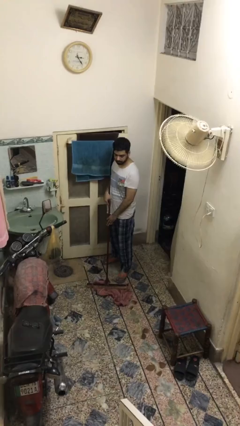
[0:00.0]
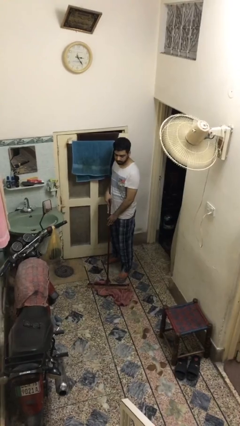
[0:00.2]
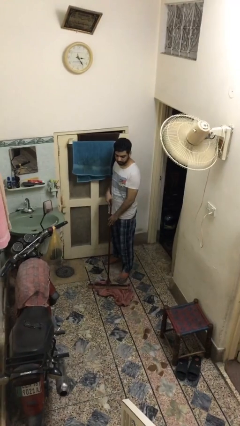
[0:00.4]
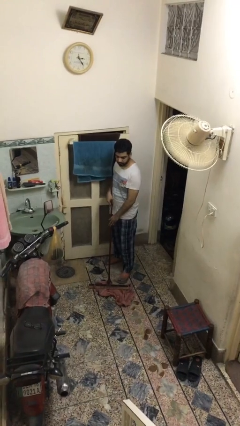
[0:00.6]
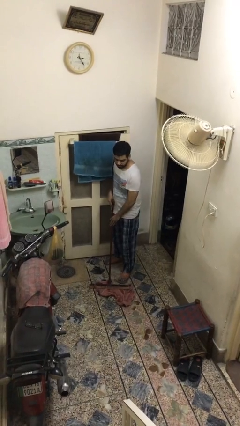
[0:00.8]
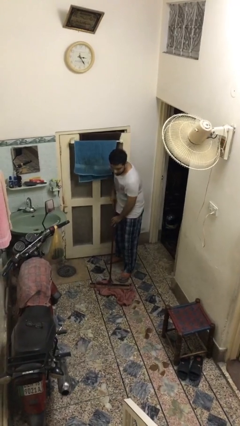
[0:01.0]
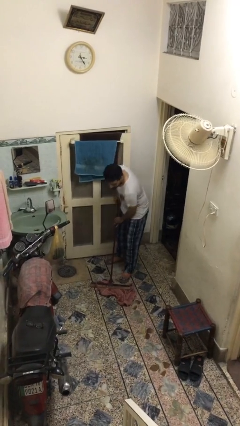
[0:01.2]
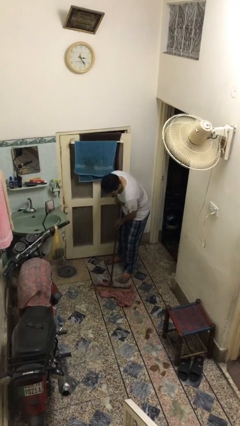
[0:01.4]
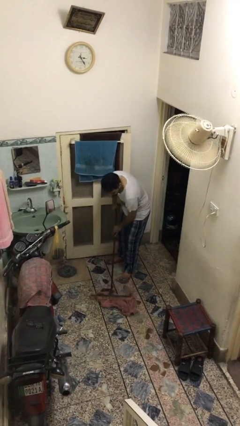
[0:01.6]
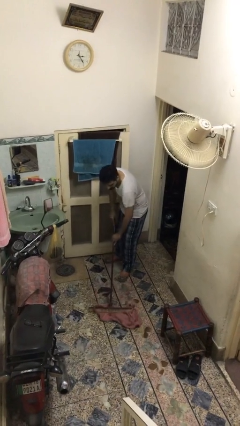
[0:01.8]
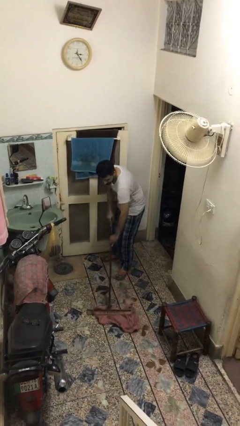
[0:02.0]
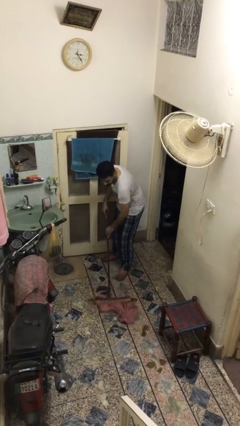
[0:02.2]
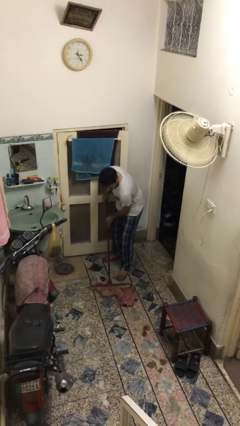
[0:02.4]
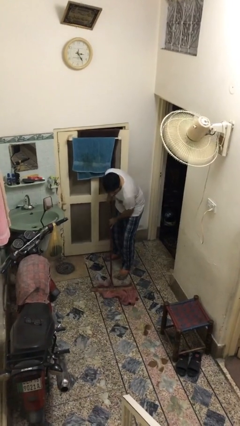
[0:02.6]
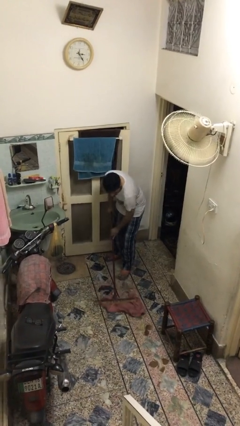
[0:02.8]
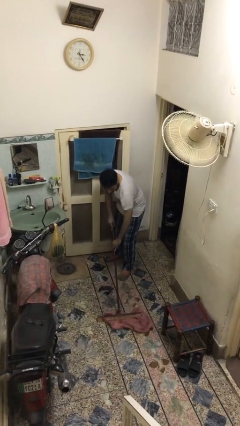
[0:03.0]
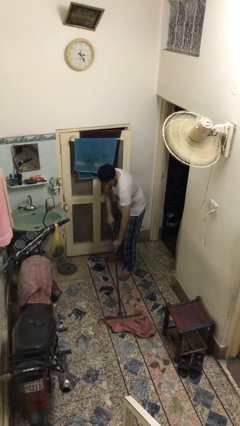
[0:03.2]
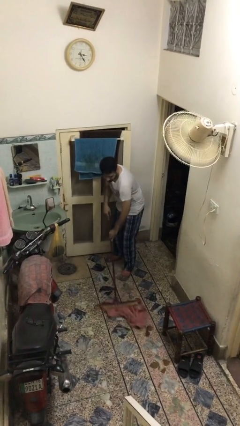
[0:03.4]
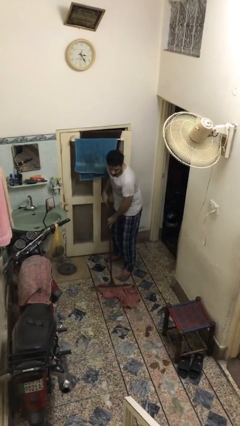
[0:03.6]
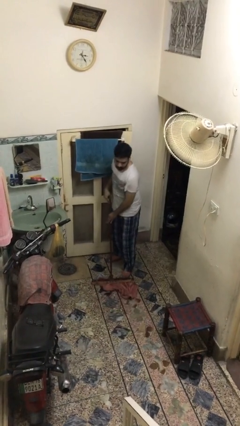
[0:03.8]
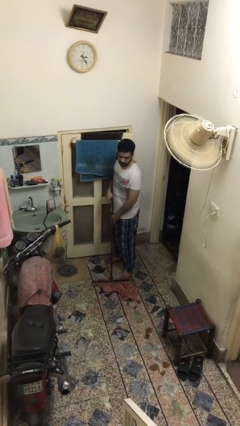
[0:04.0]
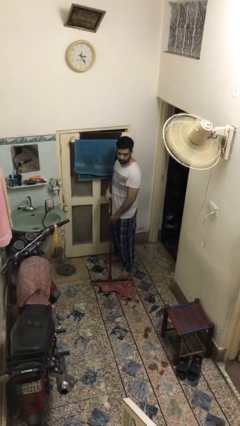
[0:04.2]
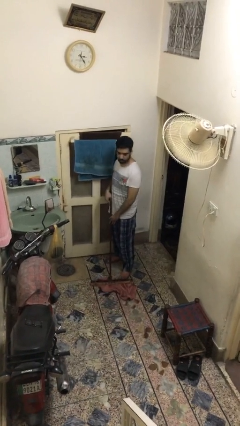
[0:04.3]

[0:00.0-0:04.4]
person mops

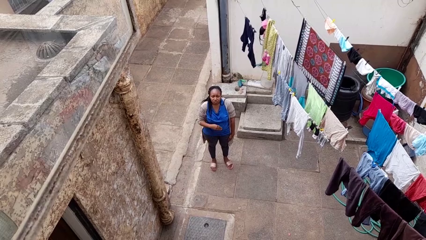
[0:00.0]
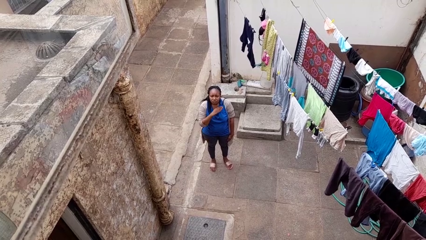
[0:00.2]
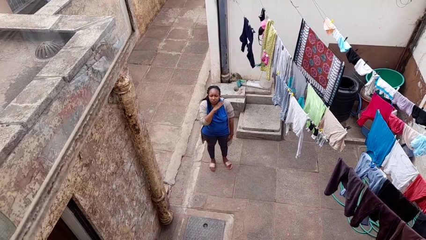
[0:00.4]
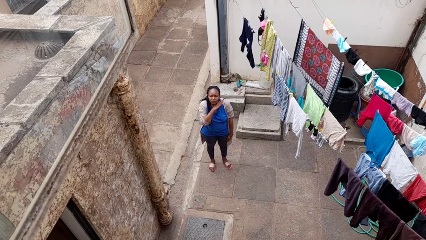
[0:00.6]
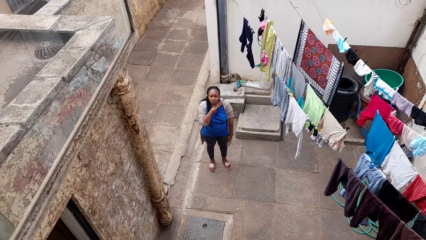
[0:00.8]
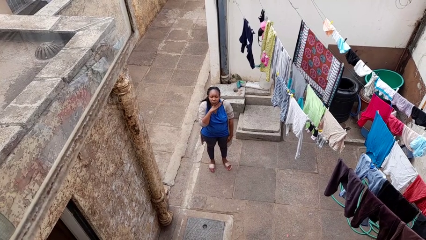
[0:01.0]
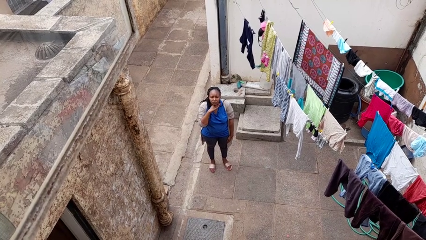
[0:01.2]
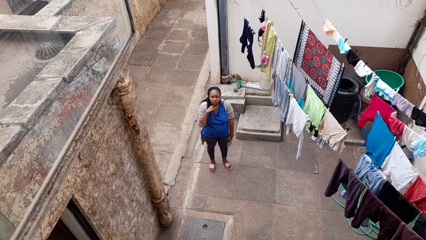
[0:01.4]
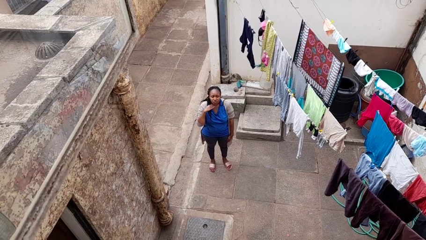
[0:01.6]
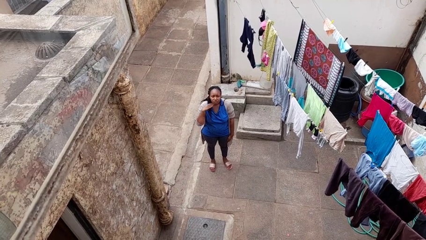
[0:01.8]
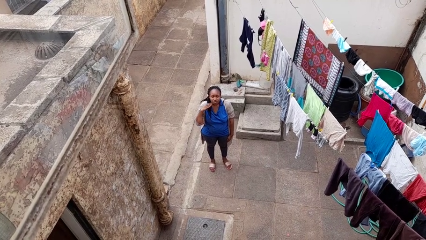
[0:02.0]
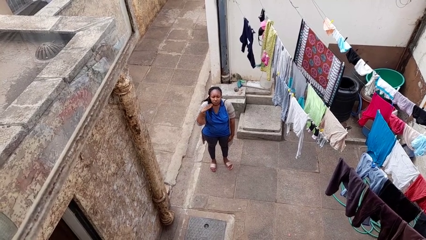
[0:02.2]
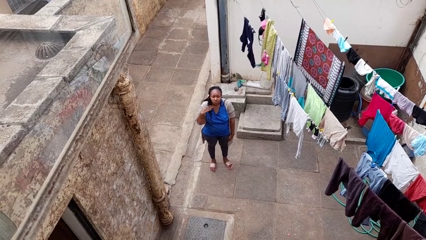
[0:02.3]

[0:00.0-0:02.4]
person gestures cut

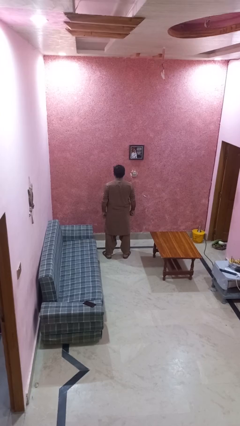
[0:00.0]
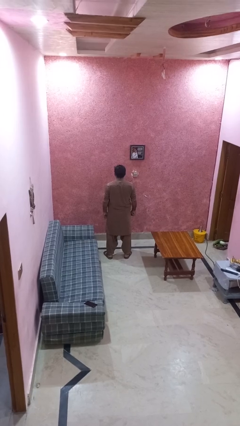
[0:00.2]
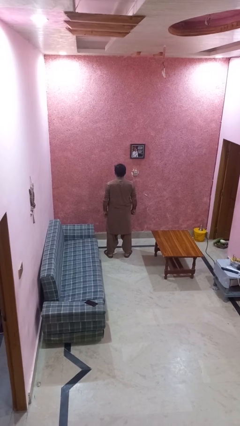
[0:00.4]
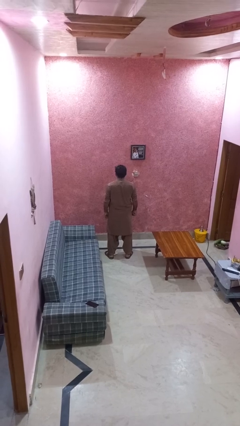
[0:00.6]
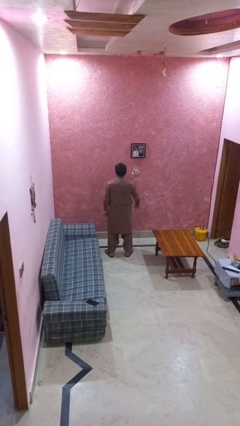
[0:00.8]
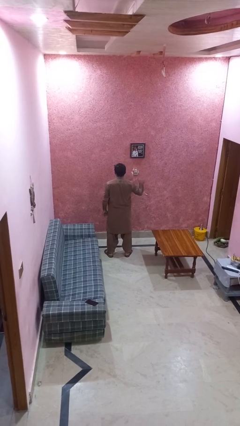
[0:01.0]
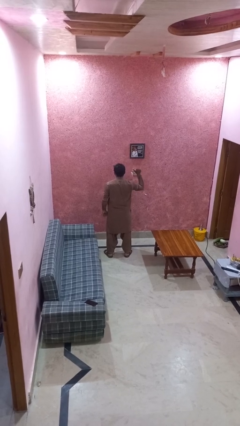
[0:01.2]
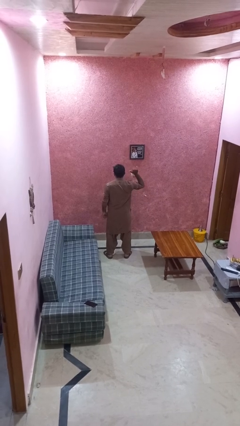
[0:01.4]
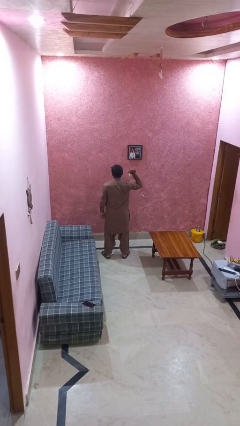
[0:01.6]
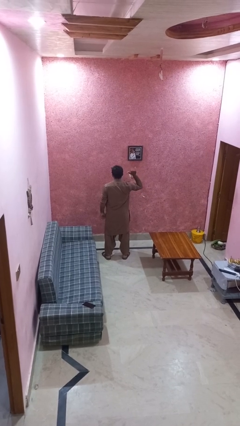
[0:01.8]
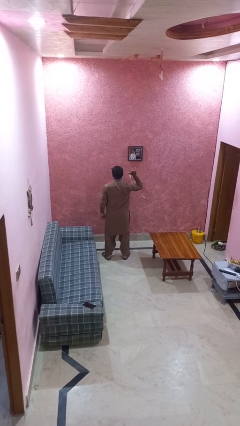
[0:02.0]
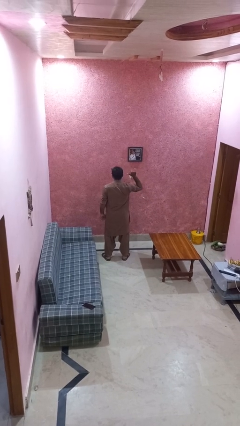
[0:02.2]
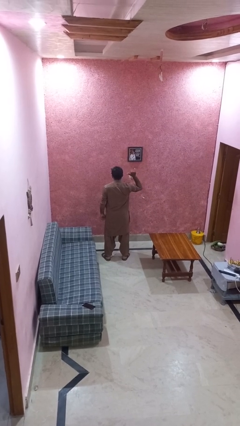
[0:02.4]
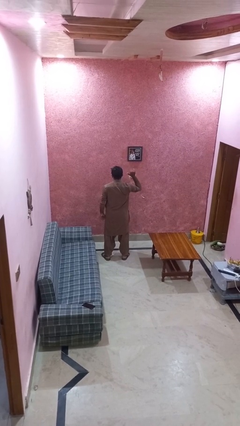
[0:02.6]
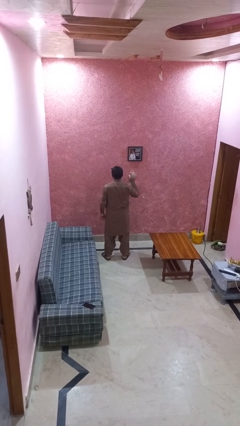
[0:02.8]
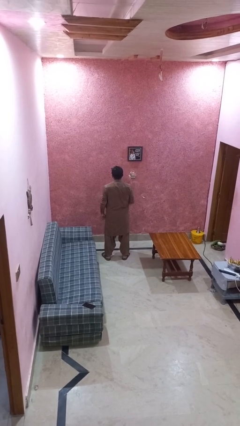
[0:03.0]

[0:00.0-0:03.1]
person gestures hang loose

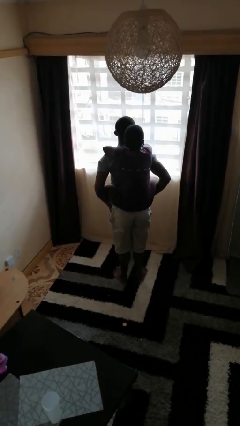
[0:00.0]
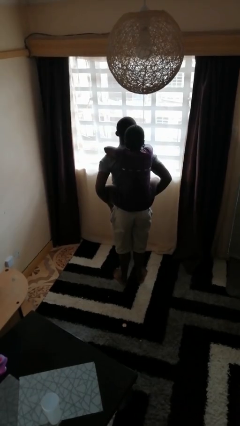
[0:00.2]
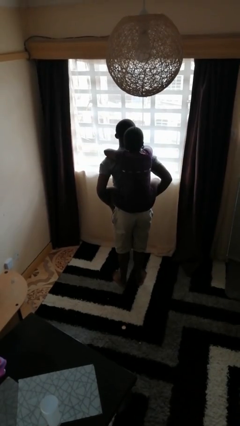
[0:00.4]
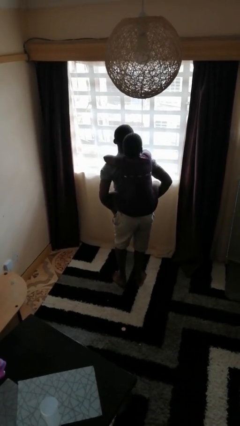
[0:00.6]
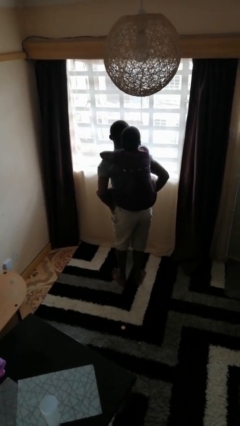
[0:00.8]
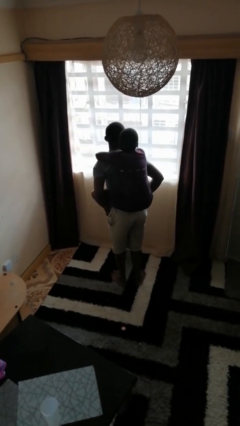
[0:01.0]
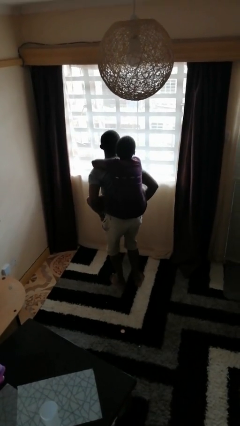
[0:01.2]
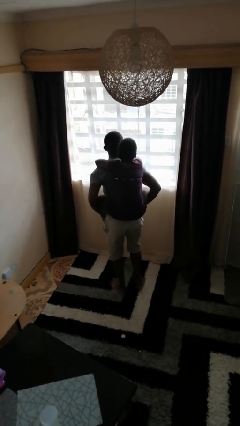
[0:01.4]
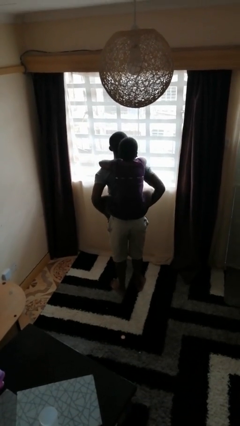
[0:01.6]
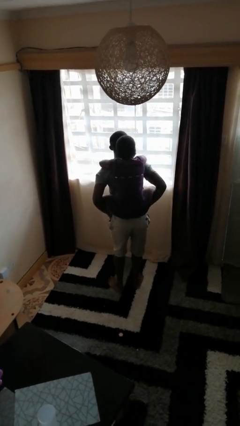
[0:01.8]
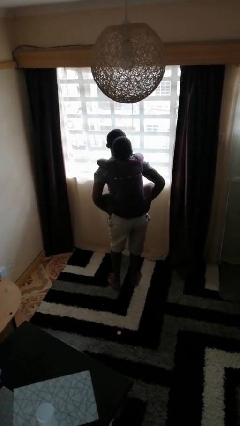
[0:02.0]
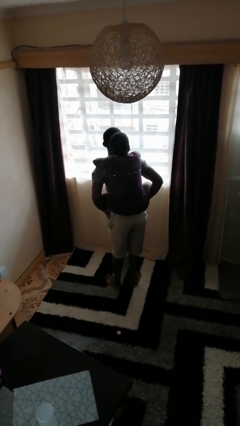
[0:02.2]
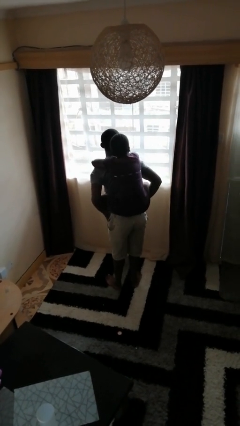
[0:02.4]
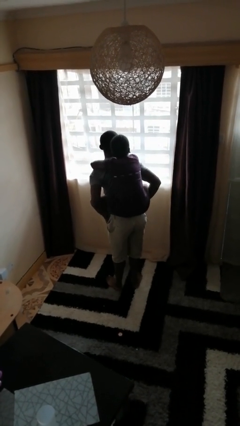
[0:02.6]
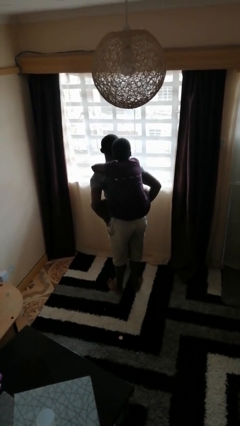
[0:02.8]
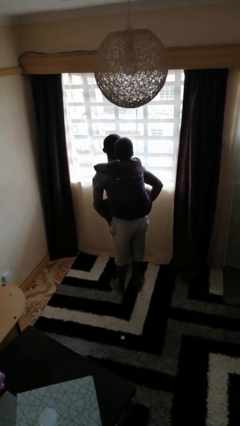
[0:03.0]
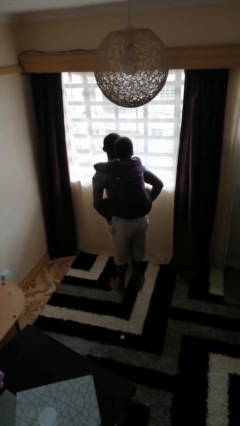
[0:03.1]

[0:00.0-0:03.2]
person carries person on back

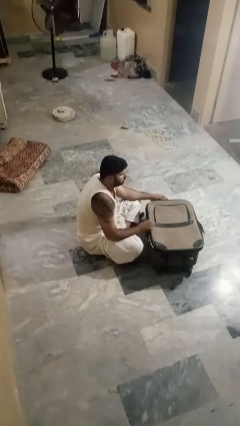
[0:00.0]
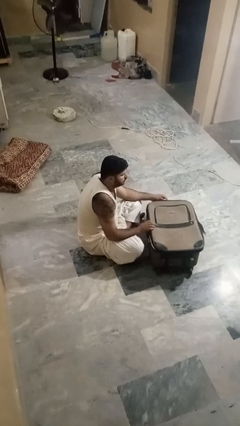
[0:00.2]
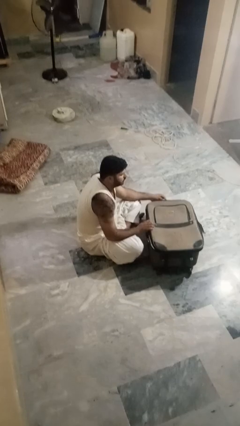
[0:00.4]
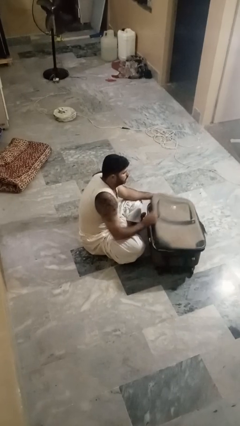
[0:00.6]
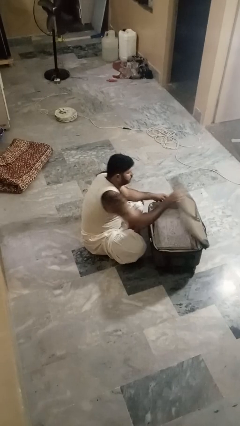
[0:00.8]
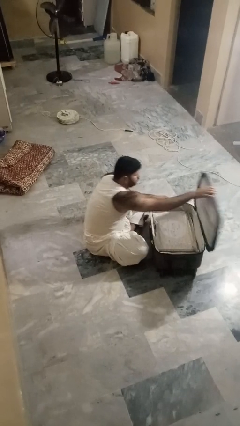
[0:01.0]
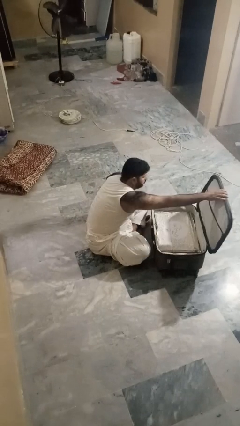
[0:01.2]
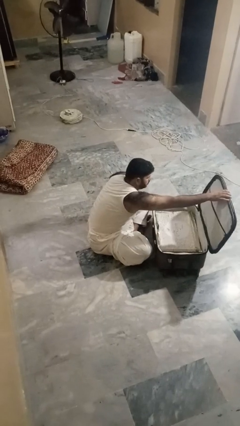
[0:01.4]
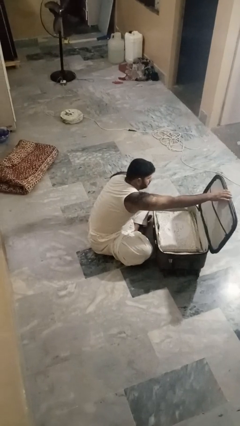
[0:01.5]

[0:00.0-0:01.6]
person opens suitcase

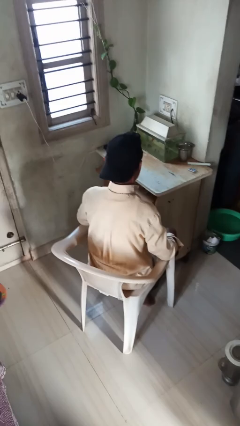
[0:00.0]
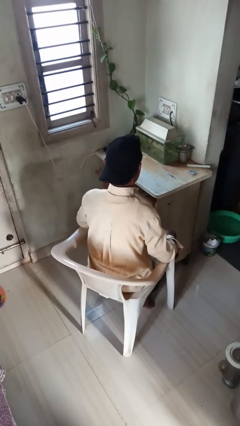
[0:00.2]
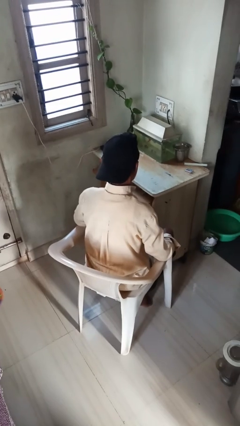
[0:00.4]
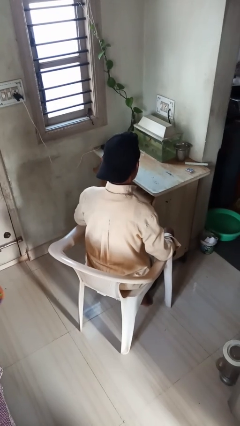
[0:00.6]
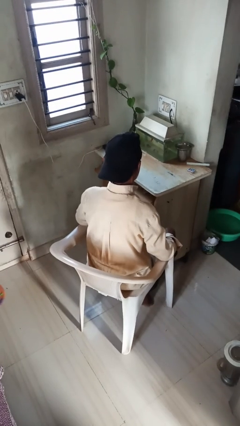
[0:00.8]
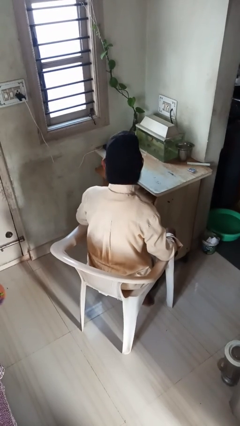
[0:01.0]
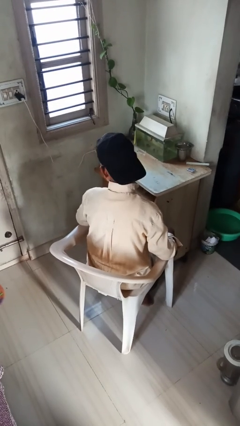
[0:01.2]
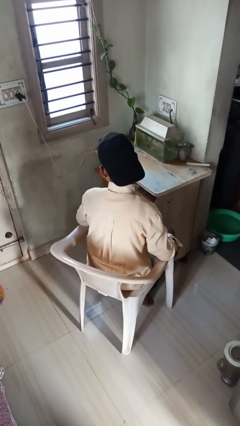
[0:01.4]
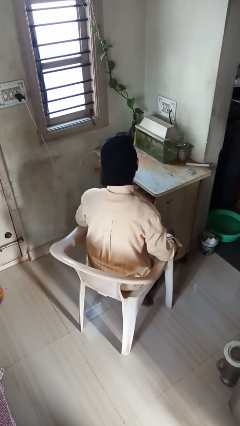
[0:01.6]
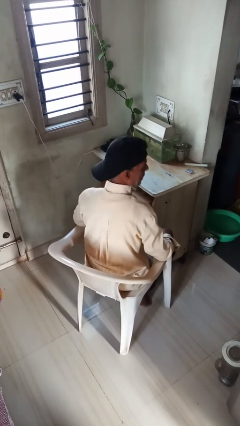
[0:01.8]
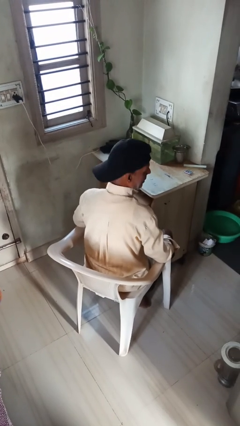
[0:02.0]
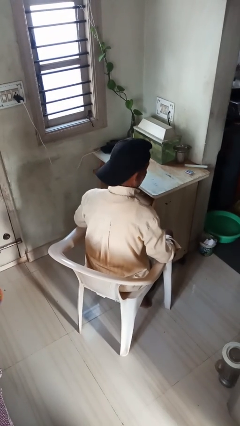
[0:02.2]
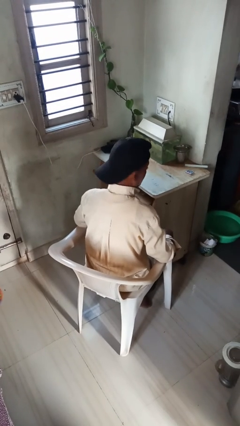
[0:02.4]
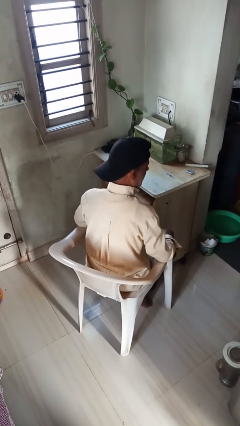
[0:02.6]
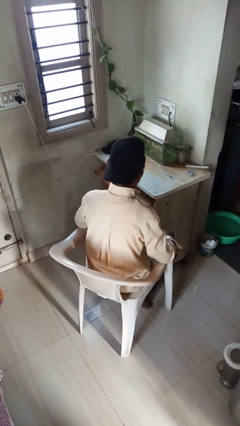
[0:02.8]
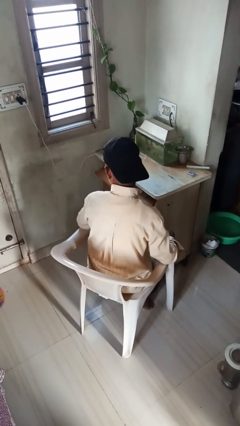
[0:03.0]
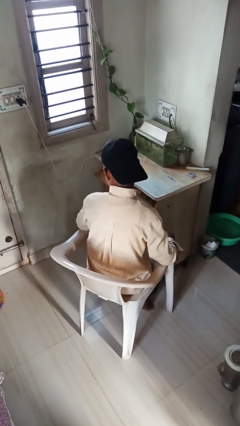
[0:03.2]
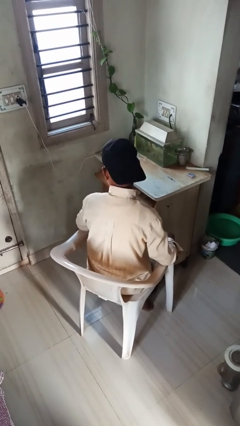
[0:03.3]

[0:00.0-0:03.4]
person shakes head
